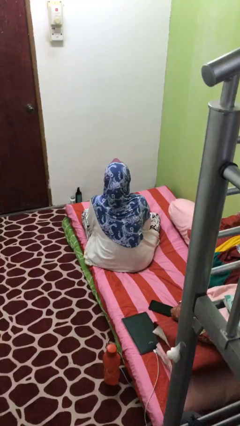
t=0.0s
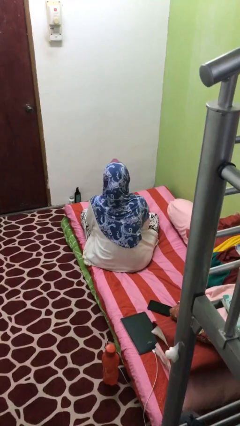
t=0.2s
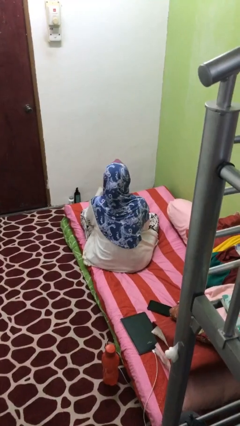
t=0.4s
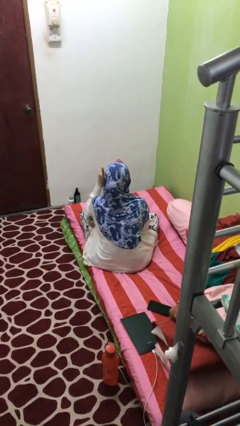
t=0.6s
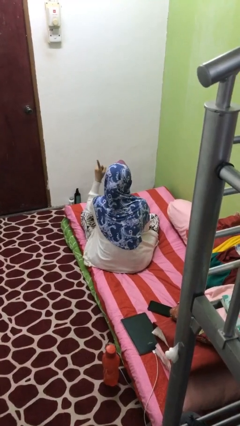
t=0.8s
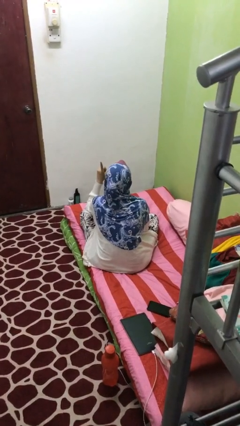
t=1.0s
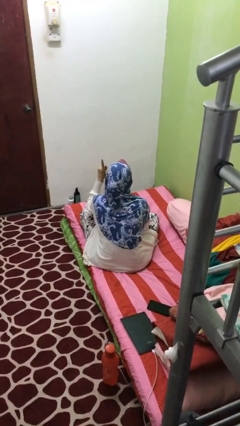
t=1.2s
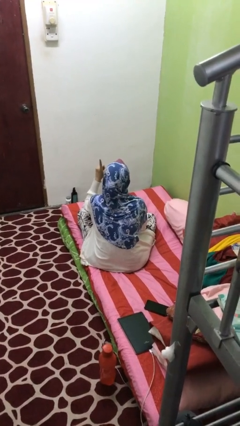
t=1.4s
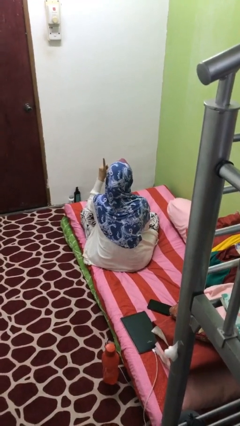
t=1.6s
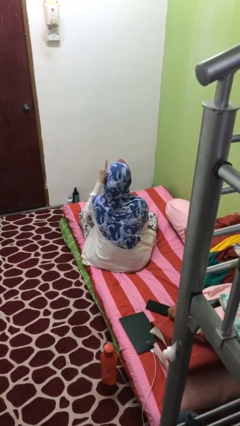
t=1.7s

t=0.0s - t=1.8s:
person gestures number one

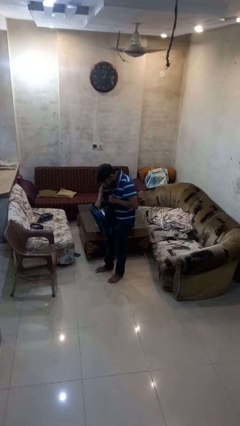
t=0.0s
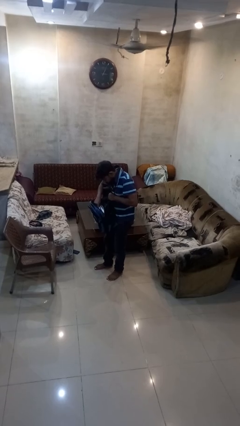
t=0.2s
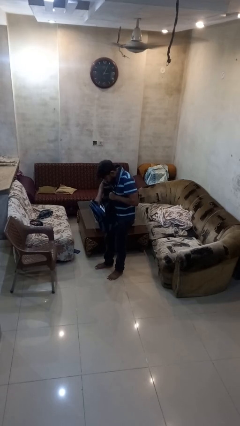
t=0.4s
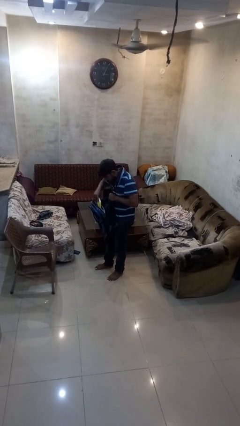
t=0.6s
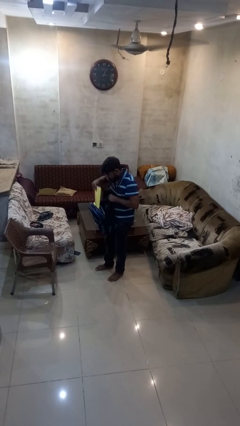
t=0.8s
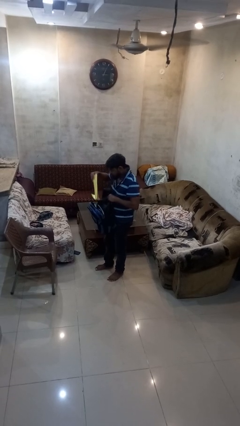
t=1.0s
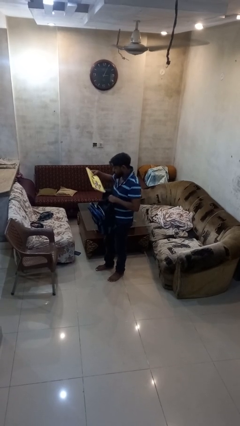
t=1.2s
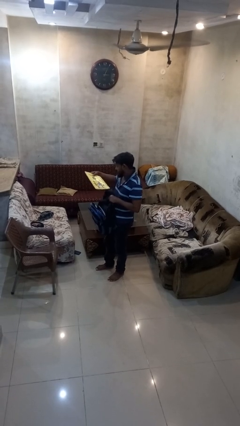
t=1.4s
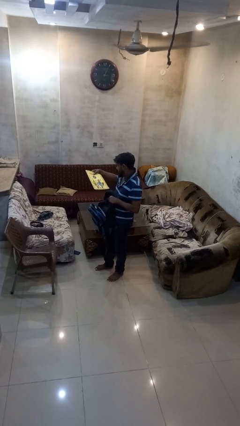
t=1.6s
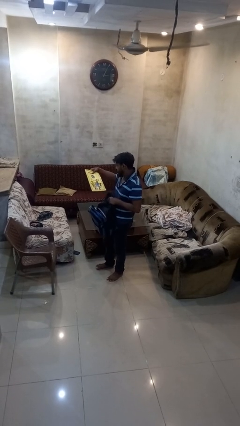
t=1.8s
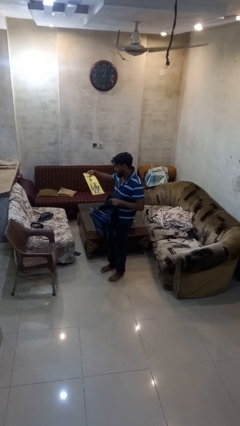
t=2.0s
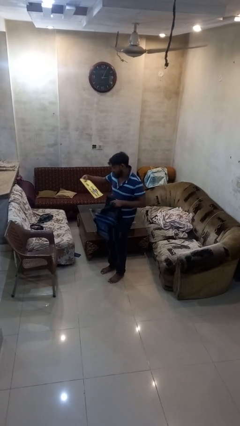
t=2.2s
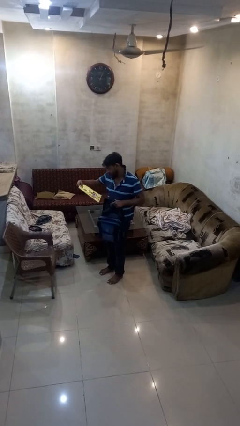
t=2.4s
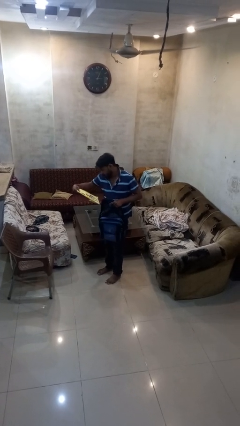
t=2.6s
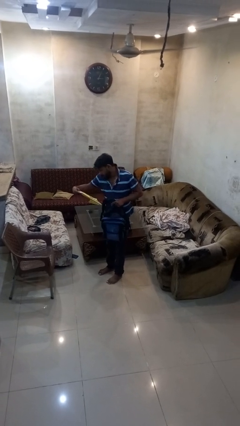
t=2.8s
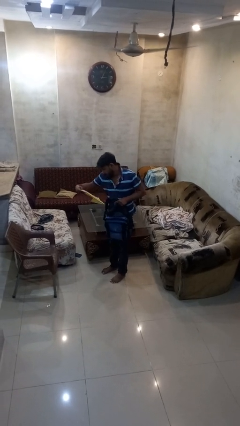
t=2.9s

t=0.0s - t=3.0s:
person takes object from backpack

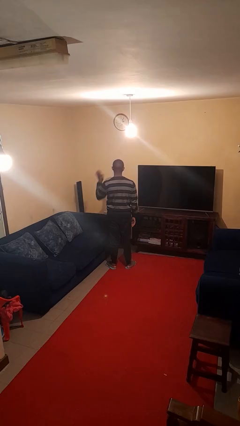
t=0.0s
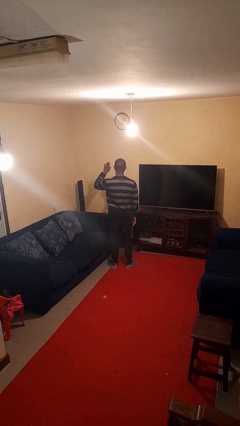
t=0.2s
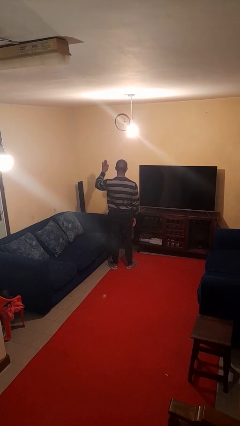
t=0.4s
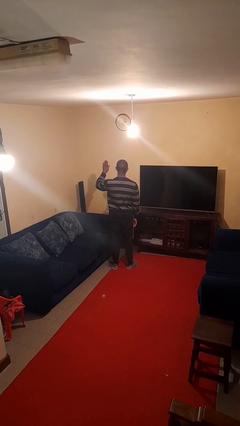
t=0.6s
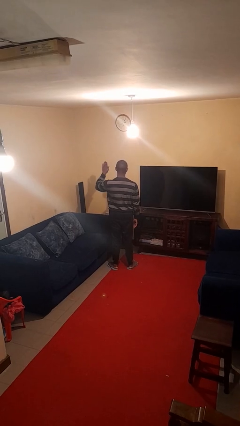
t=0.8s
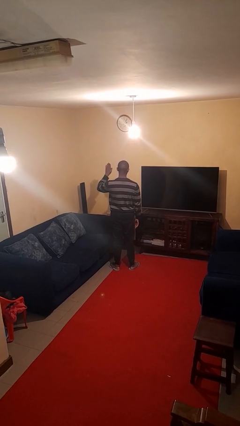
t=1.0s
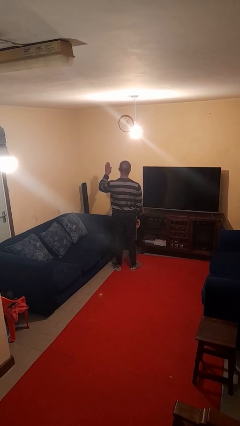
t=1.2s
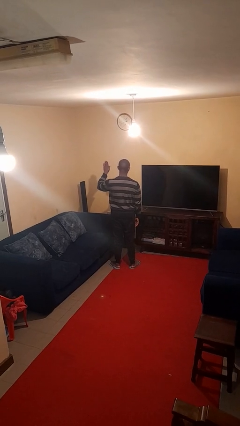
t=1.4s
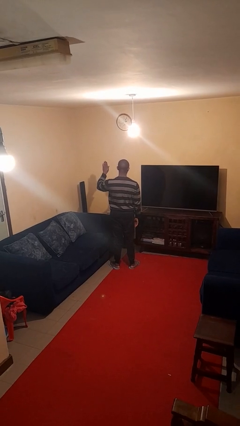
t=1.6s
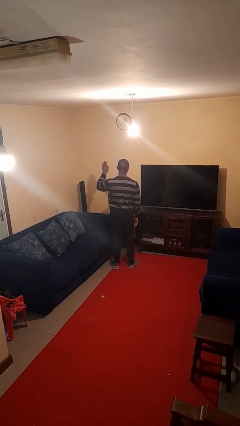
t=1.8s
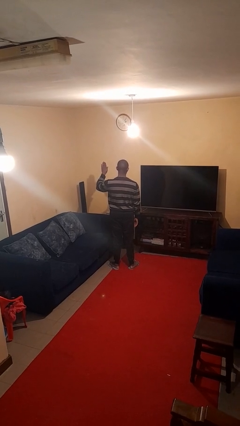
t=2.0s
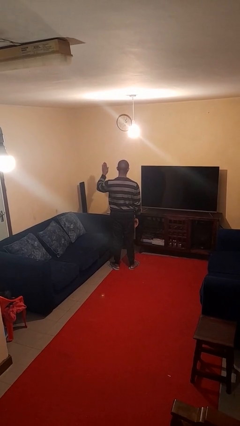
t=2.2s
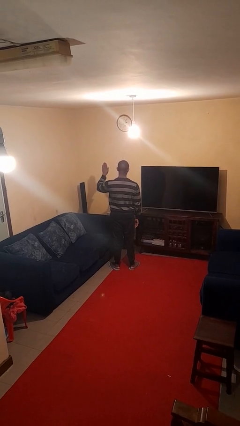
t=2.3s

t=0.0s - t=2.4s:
person gestures stop

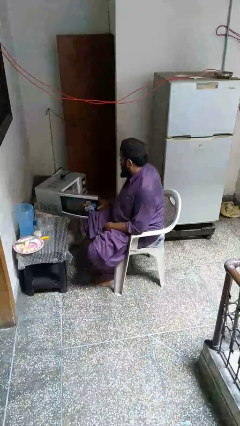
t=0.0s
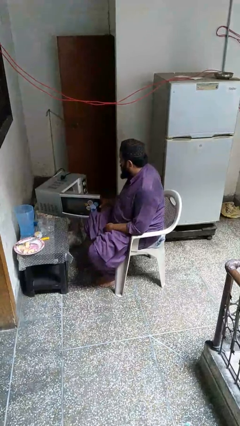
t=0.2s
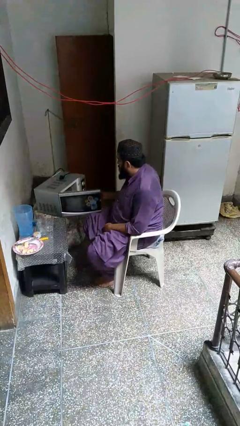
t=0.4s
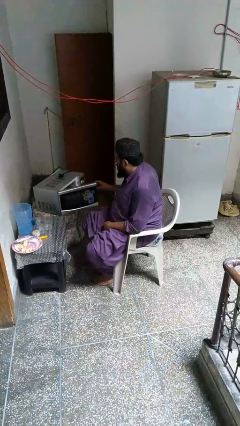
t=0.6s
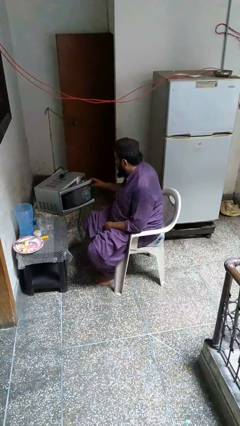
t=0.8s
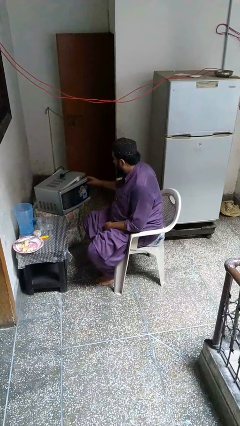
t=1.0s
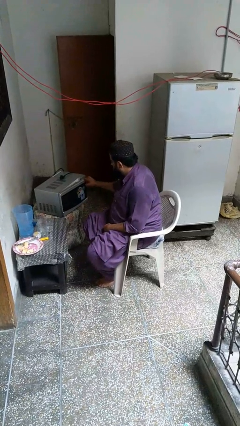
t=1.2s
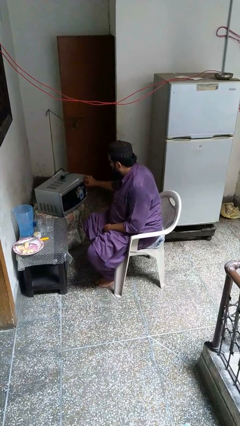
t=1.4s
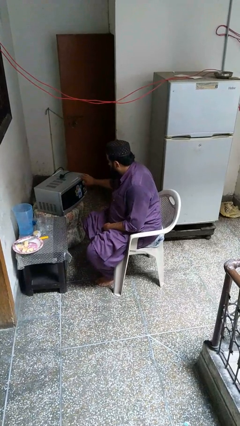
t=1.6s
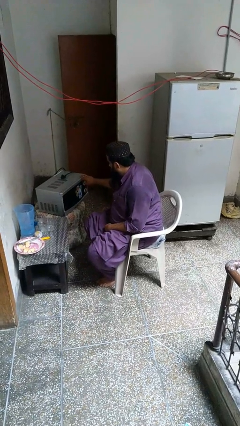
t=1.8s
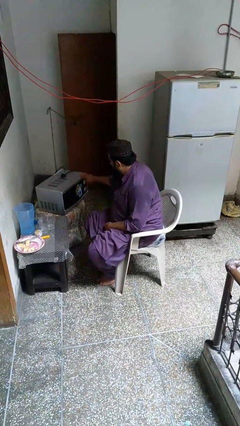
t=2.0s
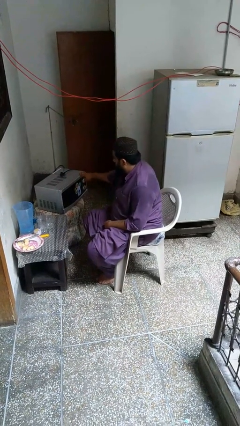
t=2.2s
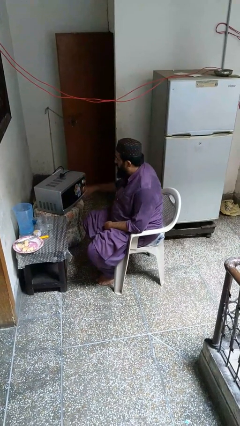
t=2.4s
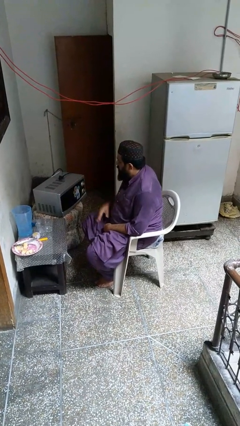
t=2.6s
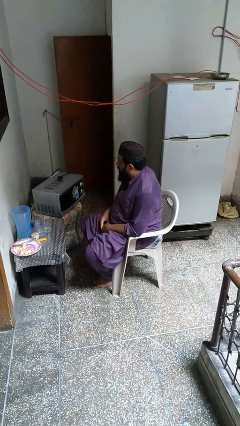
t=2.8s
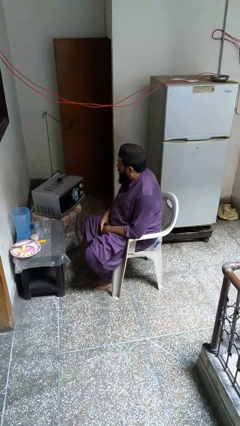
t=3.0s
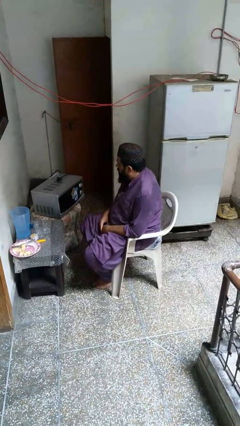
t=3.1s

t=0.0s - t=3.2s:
person closes microwave

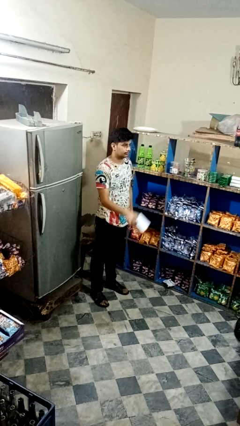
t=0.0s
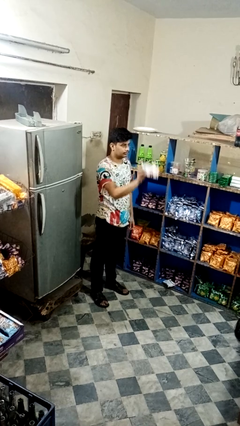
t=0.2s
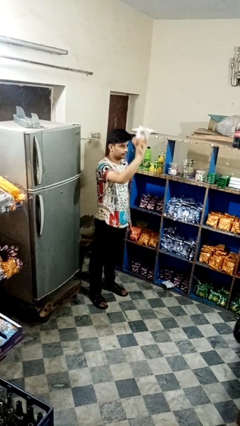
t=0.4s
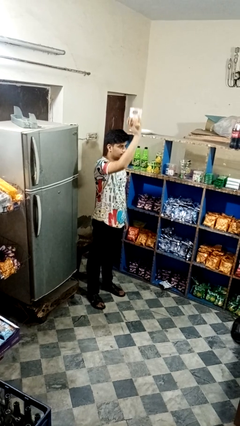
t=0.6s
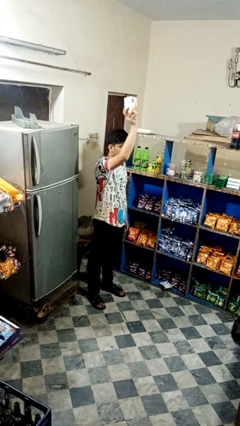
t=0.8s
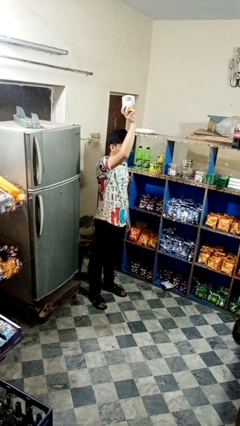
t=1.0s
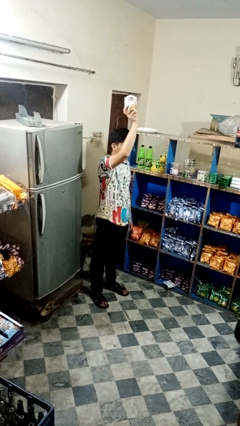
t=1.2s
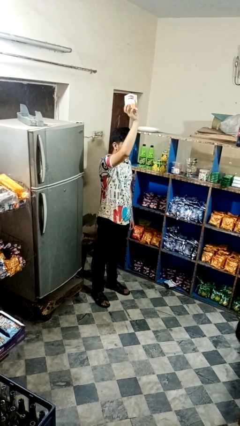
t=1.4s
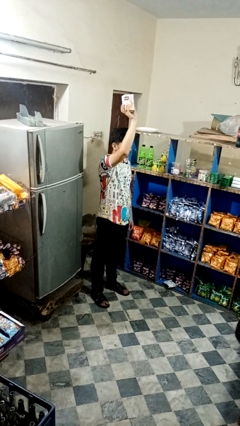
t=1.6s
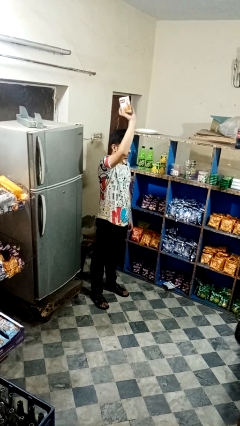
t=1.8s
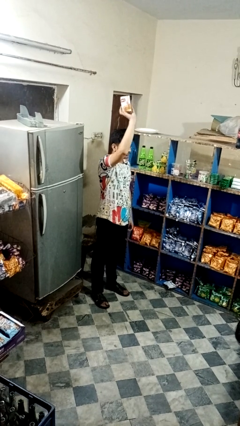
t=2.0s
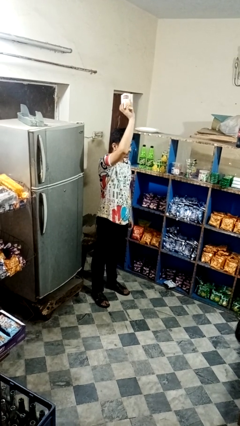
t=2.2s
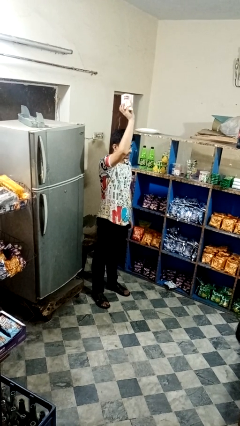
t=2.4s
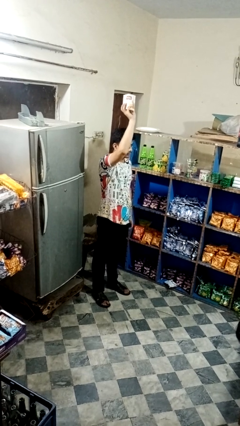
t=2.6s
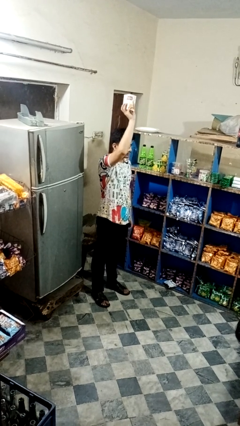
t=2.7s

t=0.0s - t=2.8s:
person holds object above head

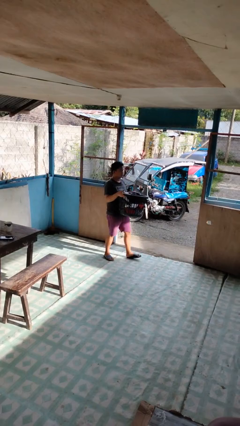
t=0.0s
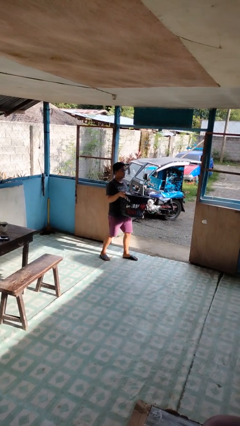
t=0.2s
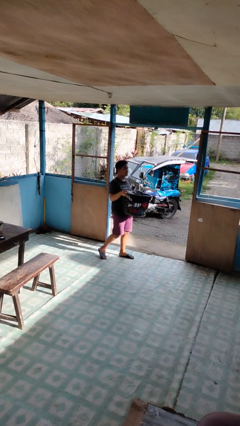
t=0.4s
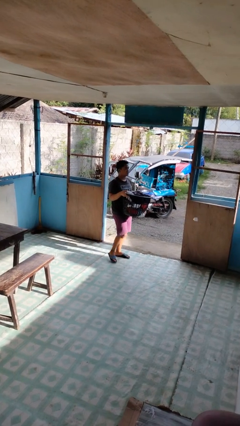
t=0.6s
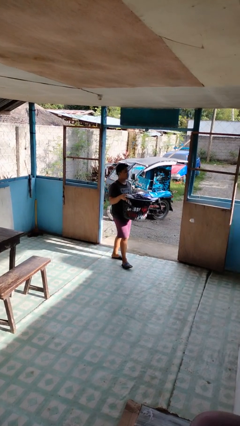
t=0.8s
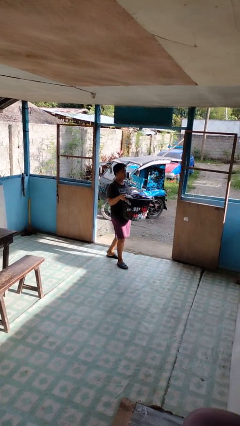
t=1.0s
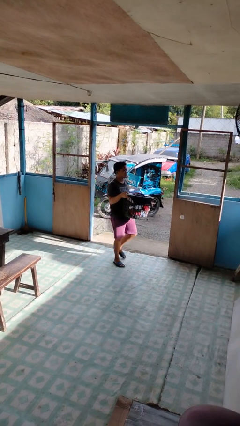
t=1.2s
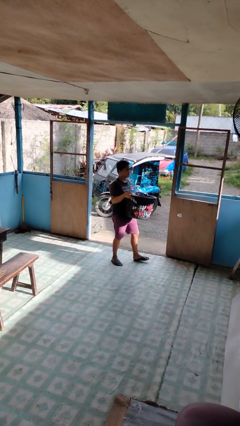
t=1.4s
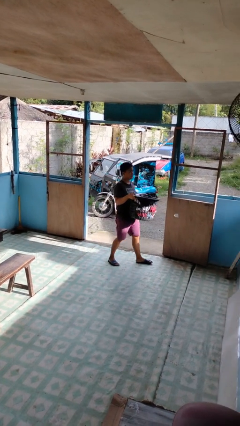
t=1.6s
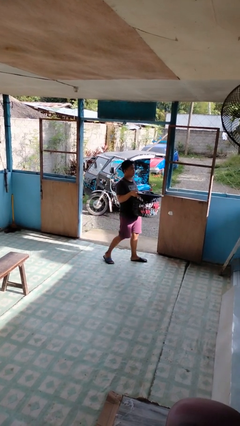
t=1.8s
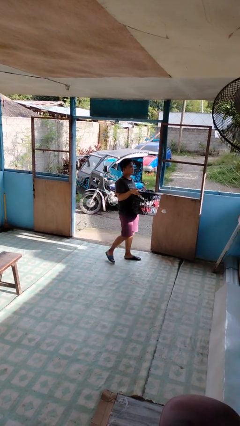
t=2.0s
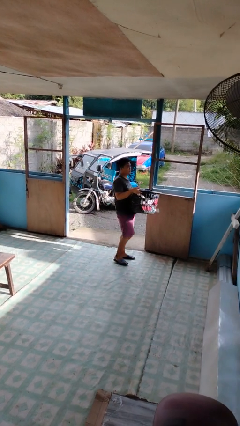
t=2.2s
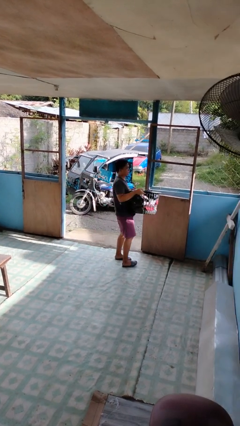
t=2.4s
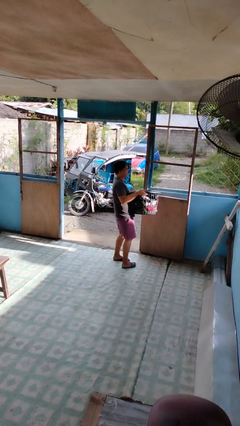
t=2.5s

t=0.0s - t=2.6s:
person carries laundry basket

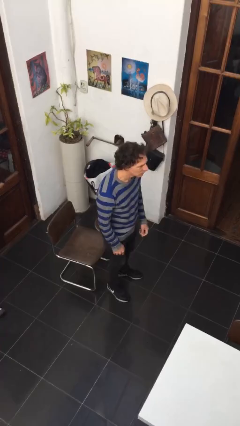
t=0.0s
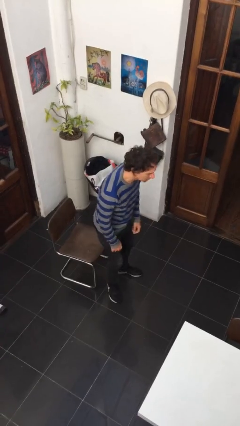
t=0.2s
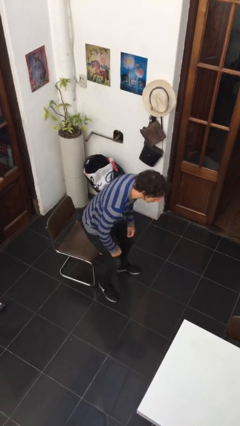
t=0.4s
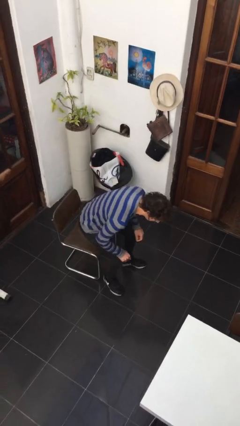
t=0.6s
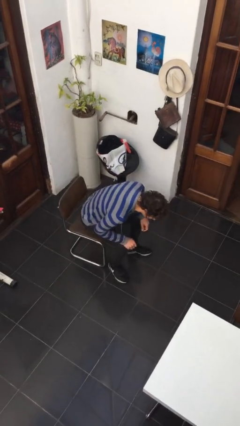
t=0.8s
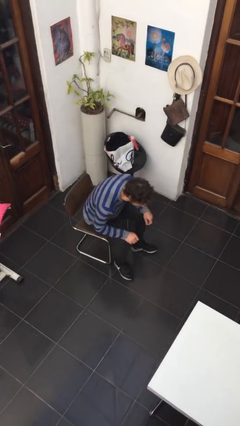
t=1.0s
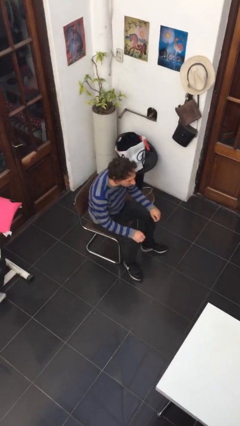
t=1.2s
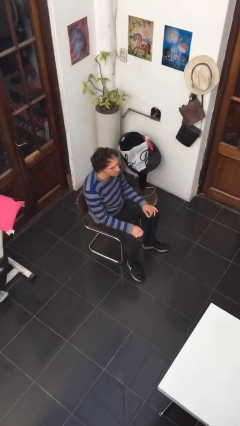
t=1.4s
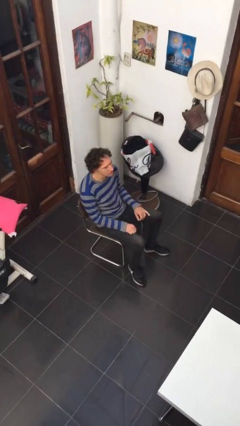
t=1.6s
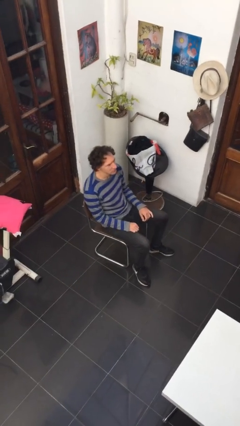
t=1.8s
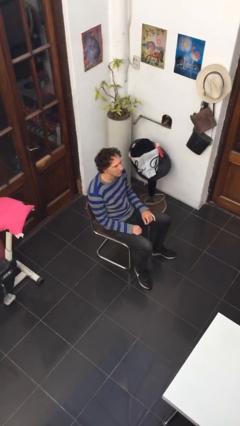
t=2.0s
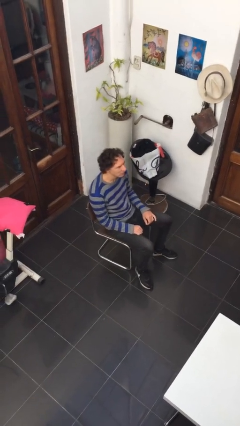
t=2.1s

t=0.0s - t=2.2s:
person sits down
